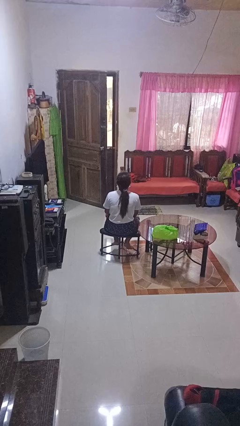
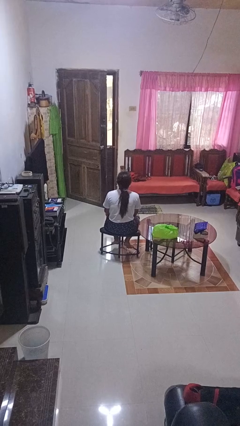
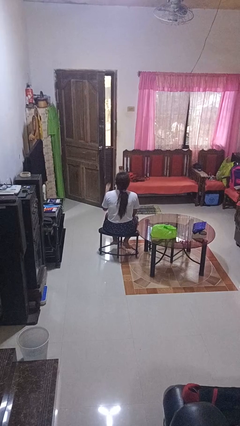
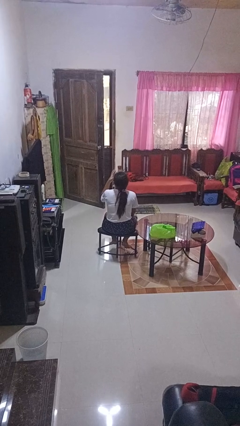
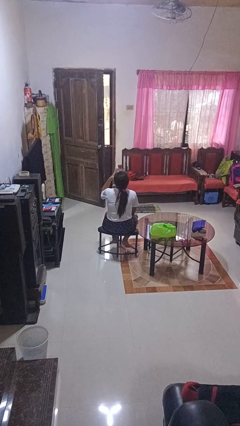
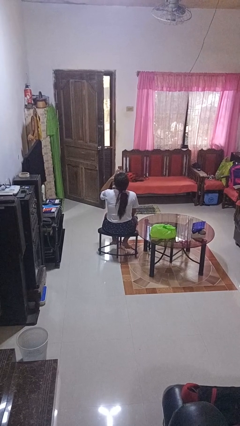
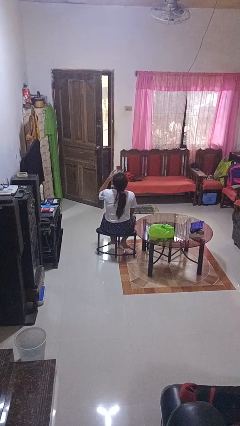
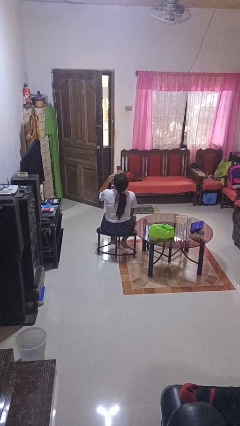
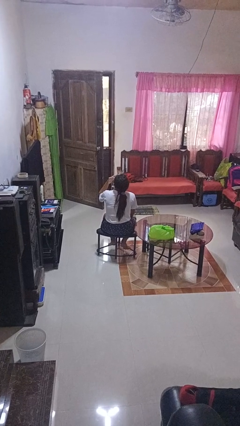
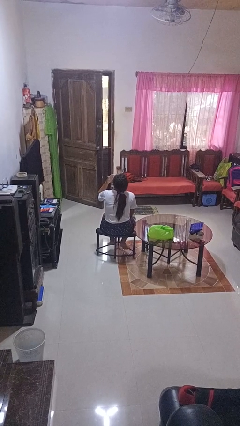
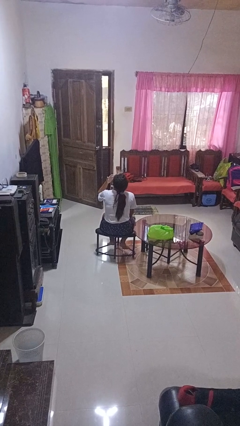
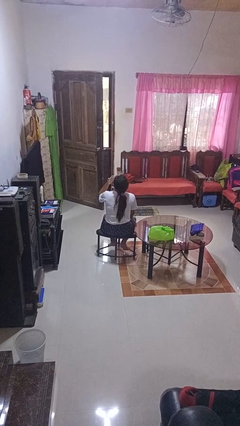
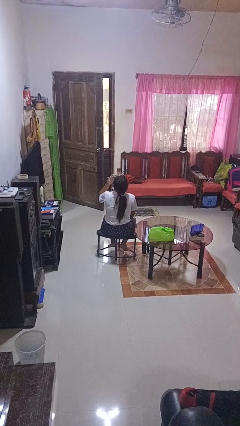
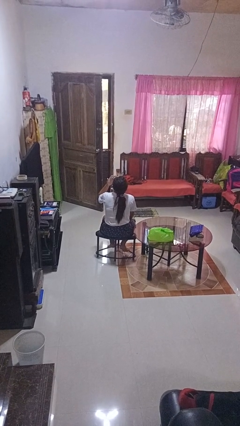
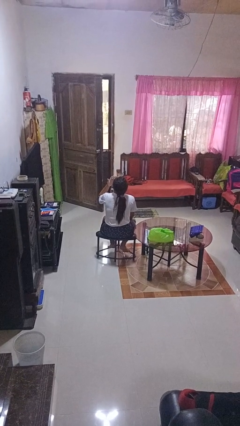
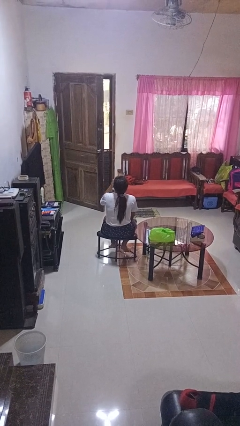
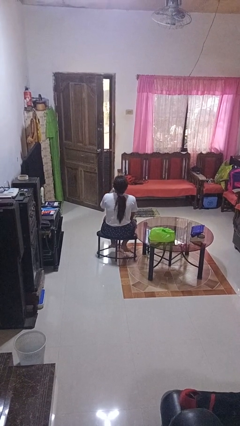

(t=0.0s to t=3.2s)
person licks fingers

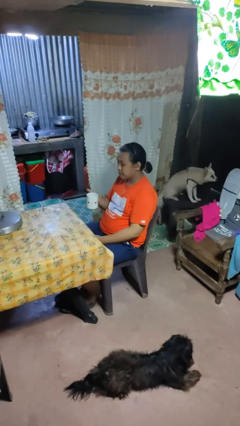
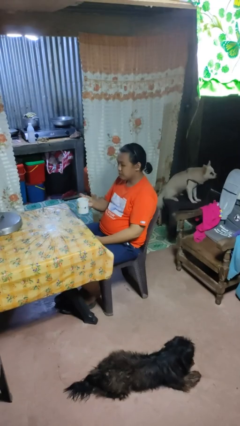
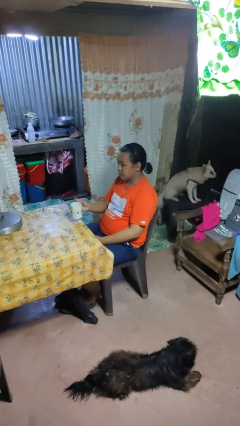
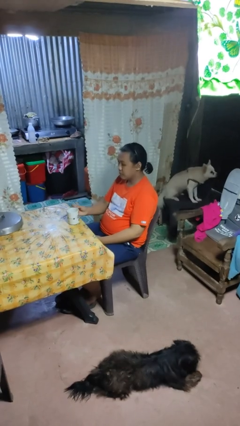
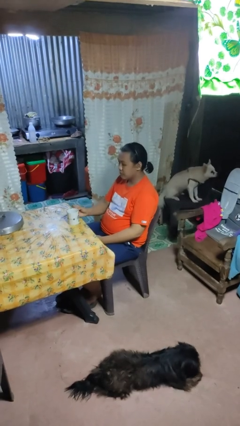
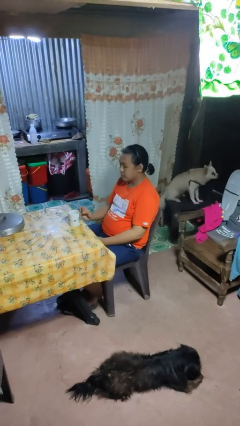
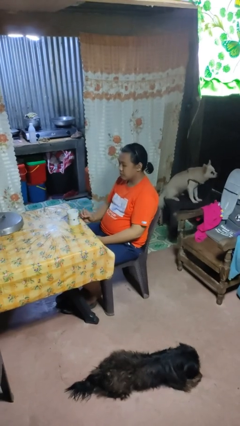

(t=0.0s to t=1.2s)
person puts down object on table

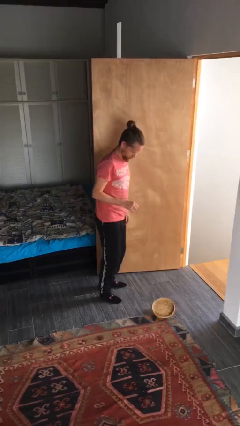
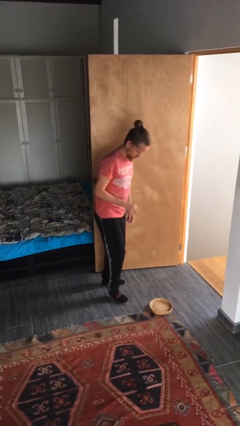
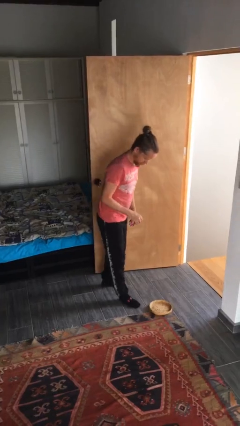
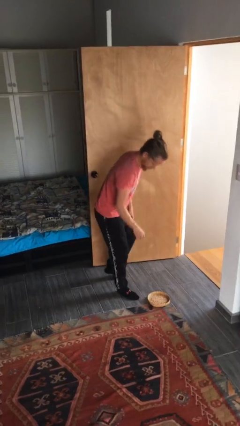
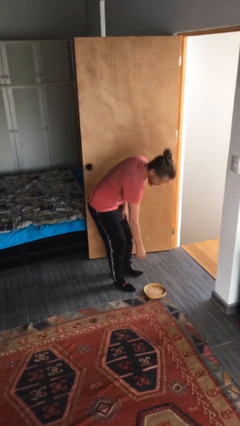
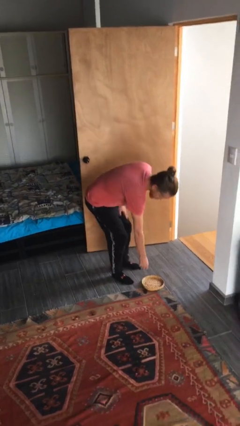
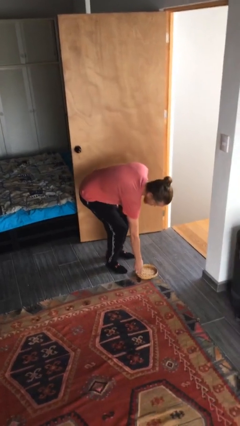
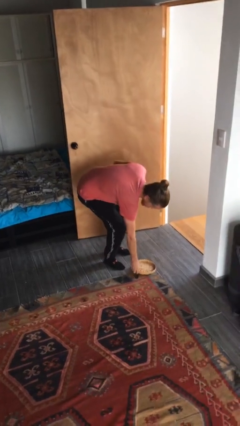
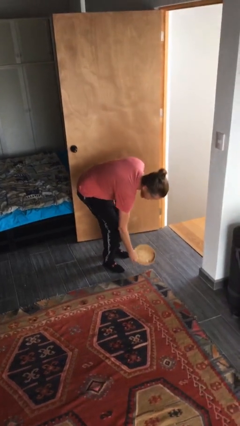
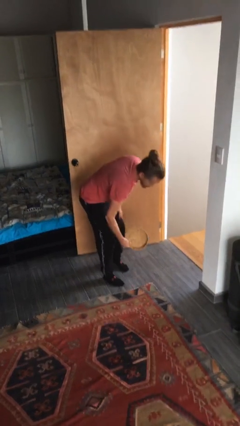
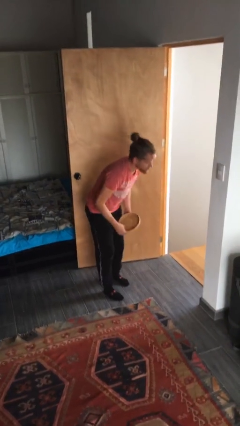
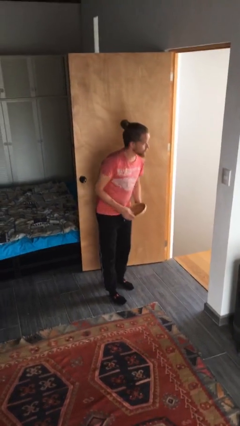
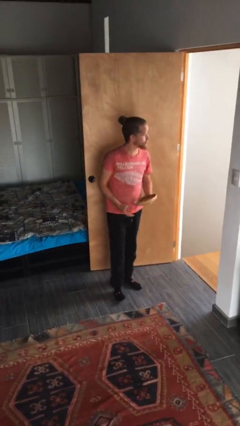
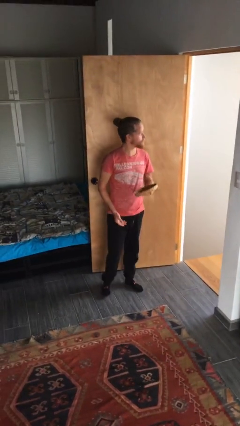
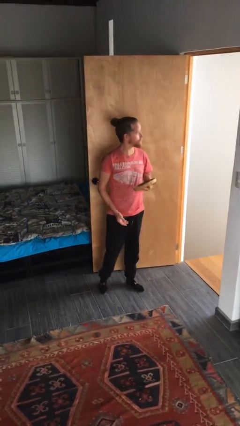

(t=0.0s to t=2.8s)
person picks up object from floor

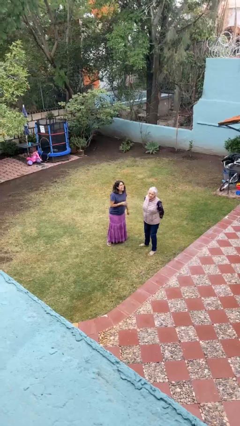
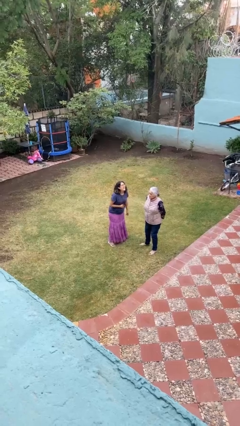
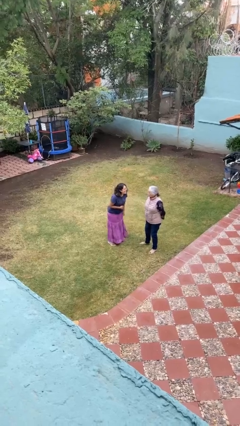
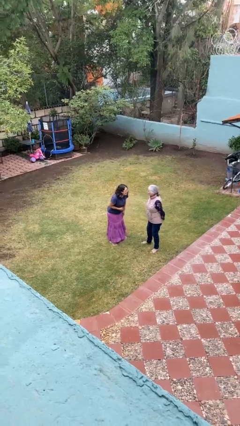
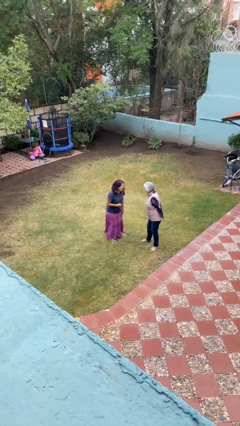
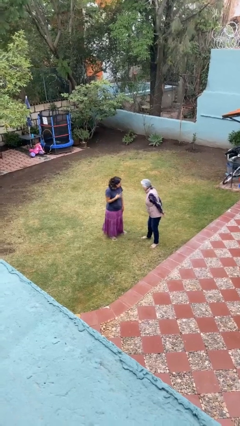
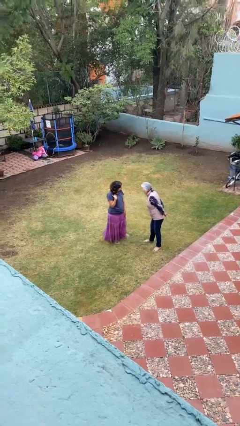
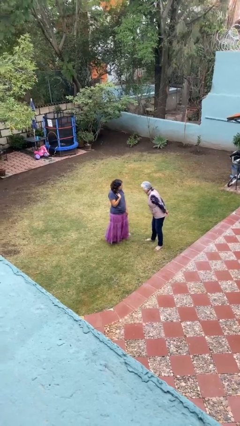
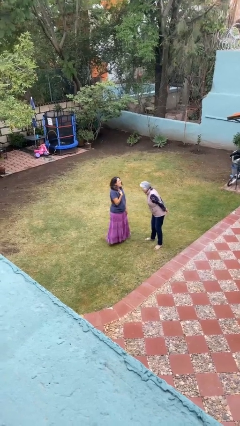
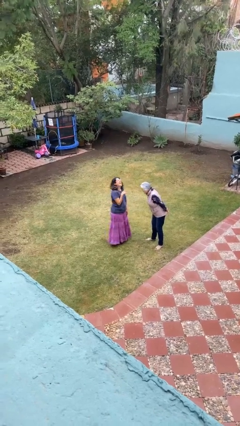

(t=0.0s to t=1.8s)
person laughs with person

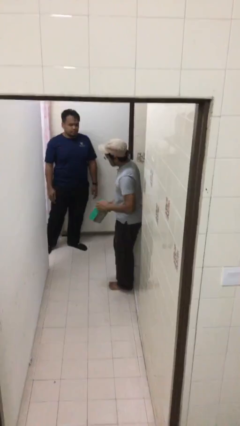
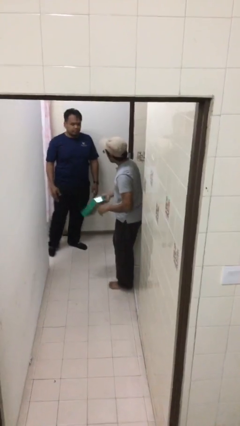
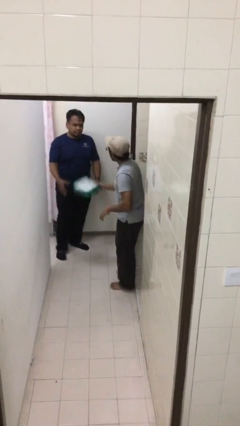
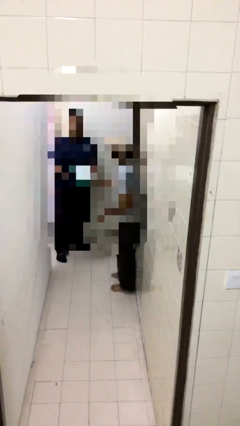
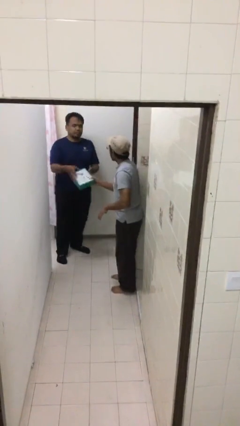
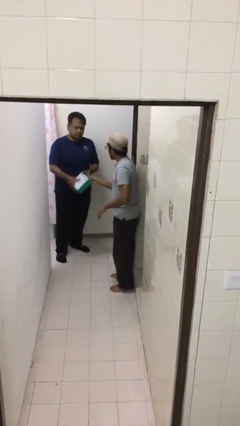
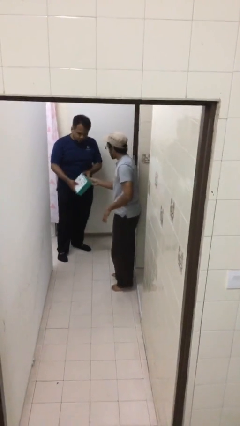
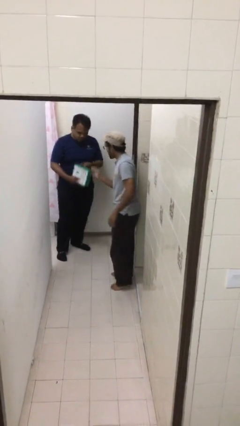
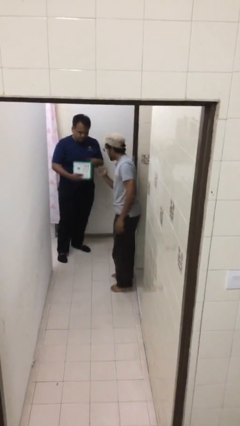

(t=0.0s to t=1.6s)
person transfers object to person

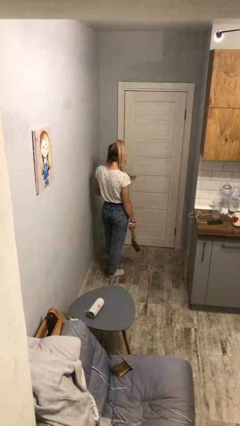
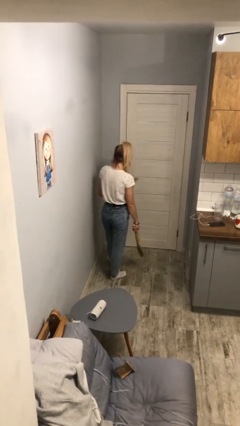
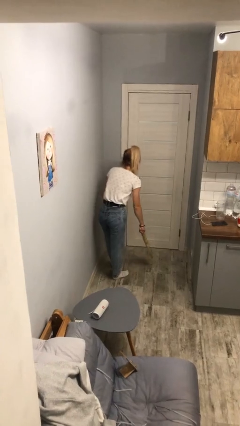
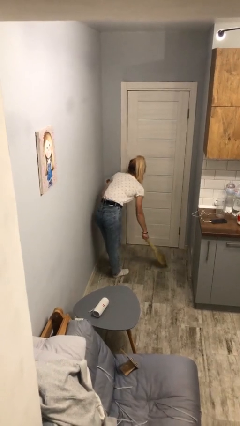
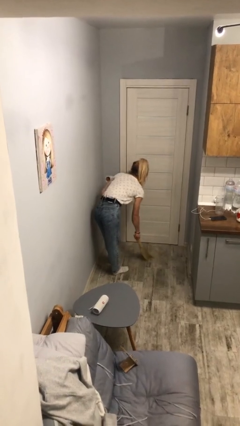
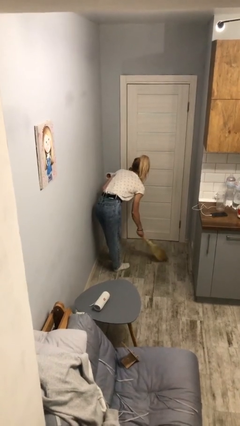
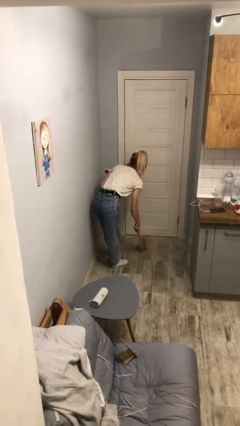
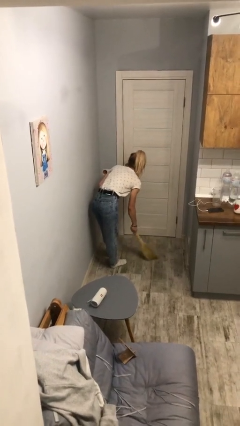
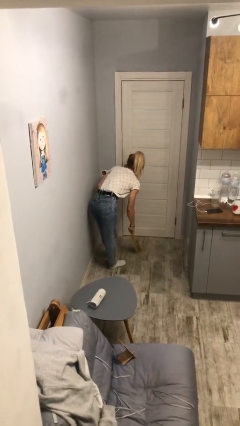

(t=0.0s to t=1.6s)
person sweeps floor

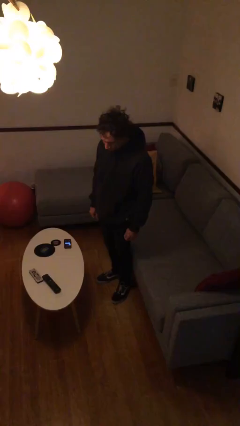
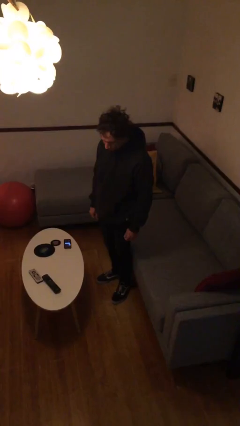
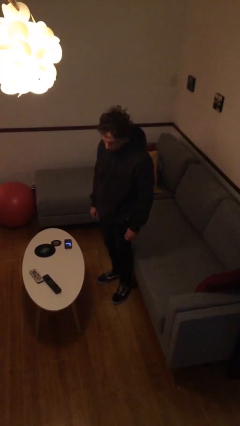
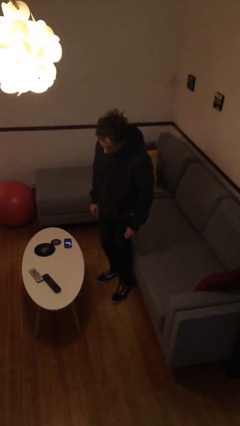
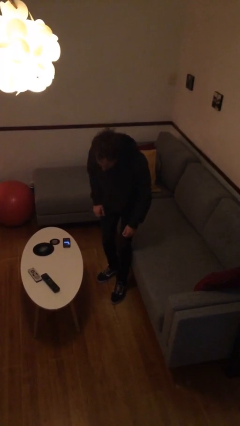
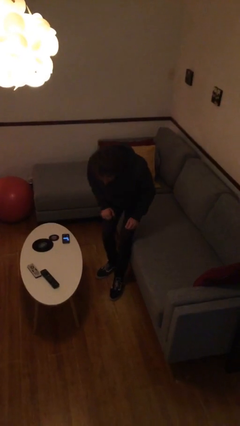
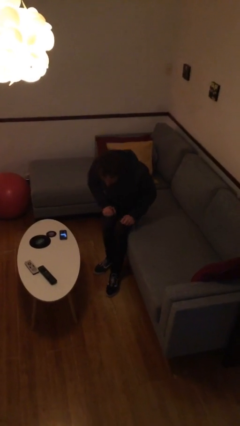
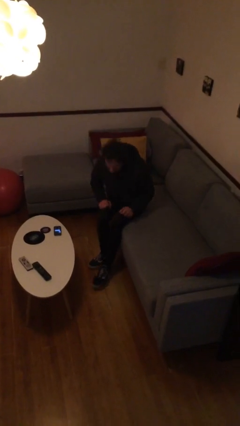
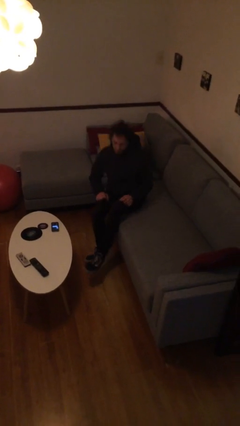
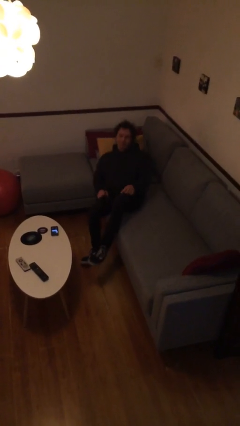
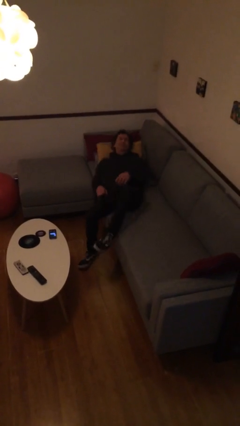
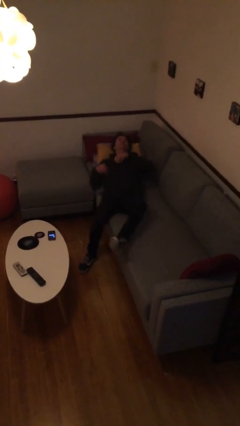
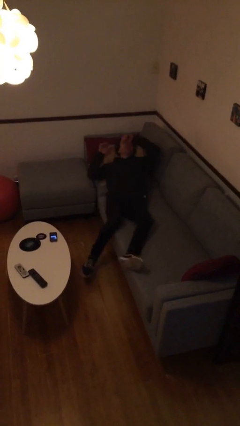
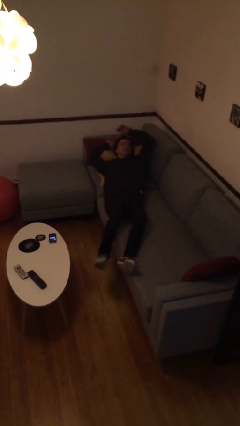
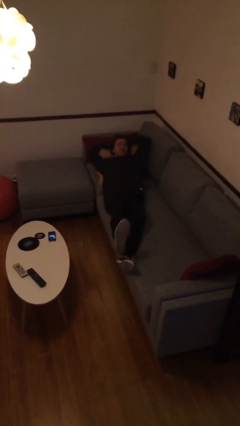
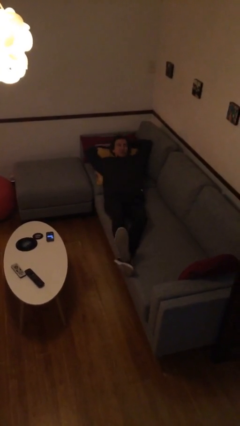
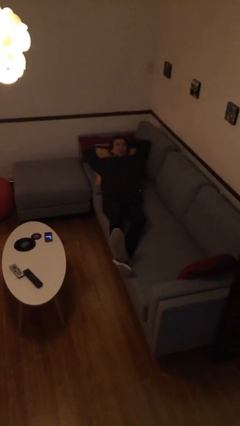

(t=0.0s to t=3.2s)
person lies down on couch

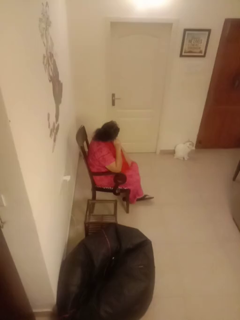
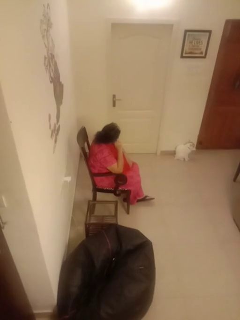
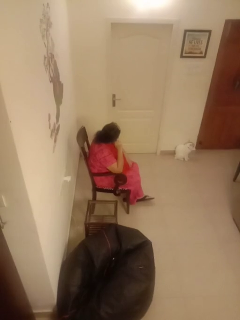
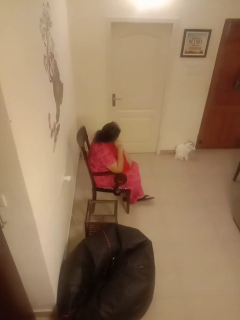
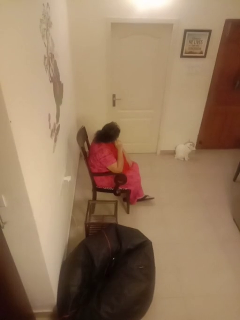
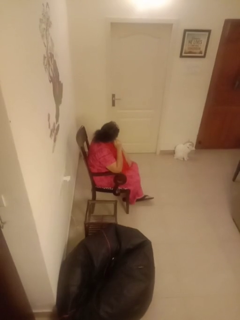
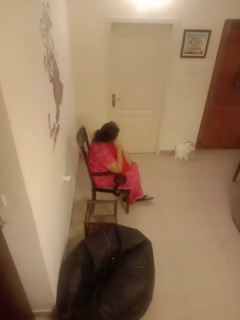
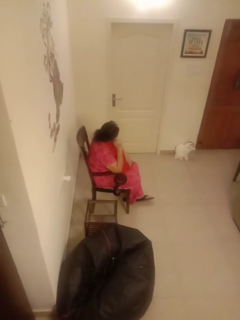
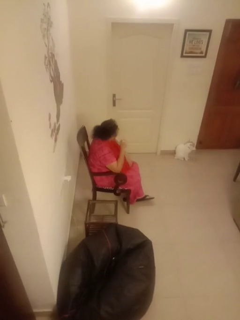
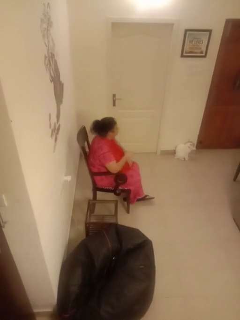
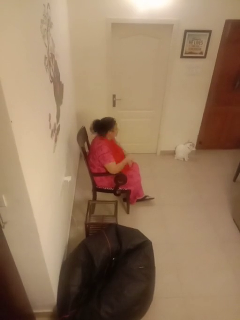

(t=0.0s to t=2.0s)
person touches earlobe
